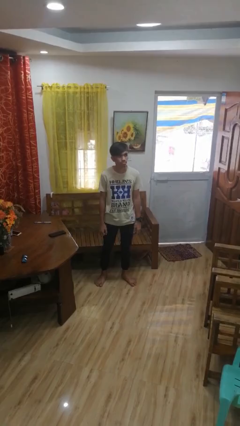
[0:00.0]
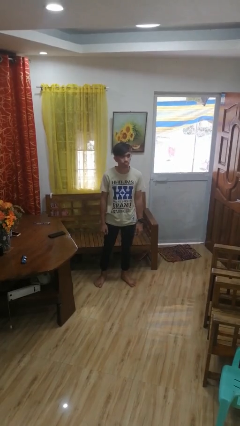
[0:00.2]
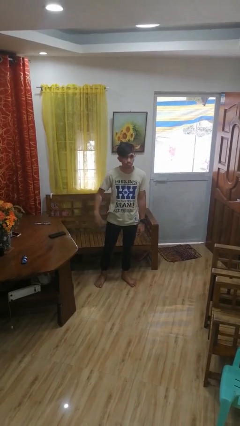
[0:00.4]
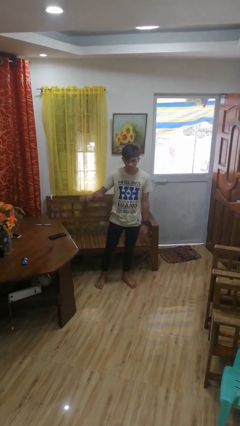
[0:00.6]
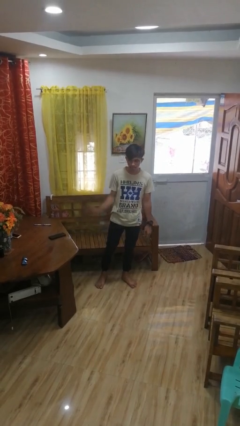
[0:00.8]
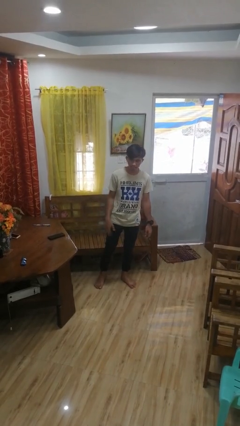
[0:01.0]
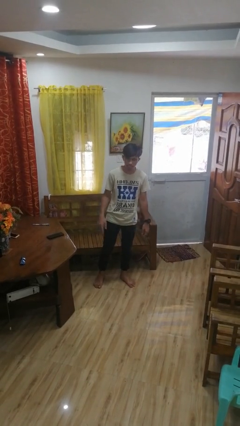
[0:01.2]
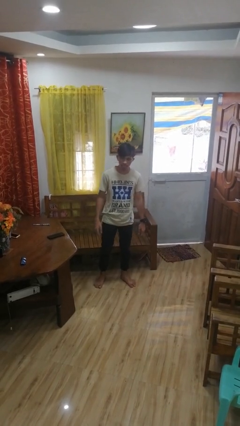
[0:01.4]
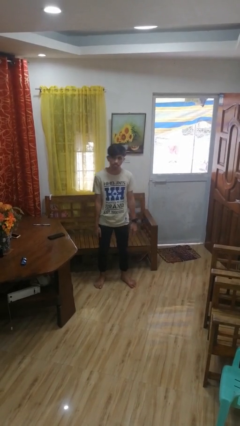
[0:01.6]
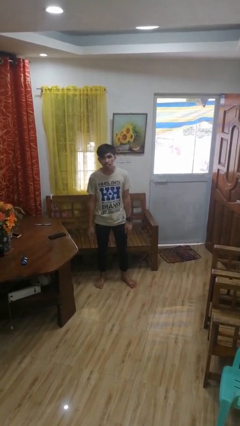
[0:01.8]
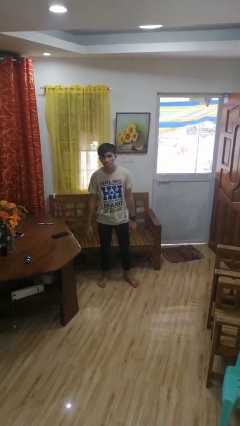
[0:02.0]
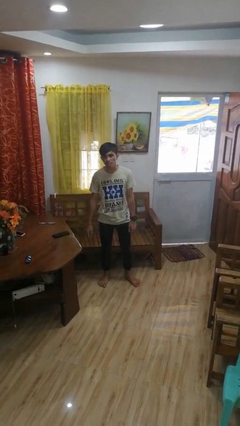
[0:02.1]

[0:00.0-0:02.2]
person slaps hands on thighs

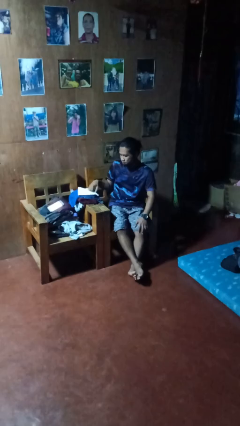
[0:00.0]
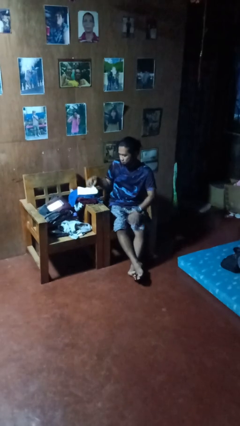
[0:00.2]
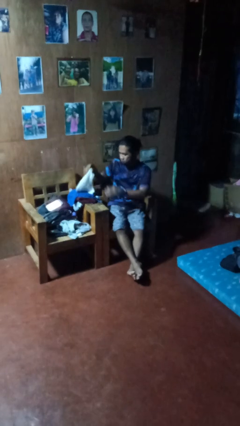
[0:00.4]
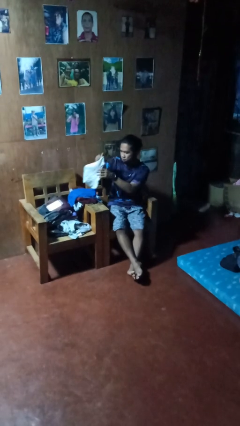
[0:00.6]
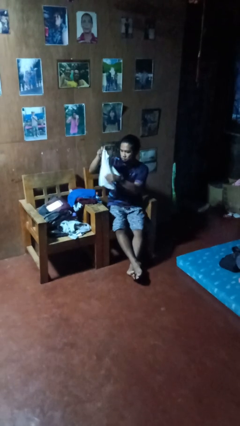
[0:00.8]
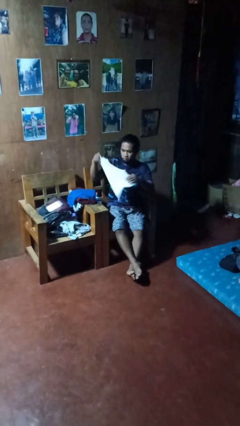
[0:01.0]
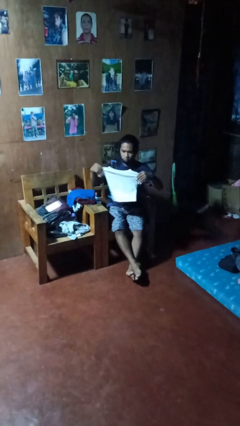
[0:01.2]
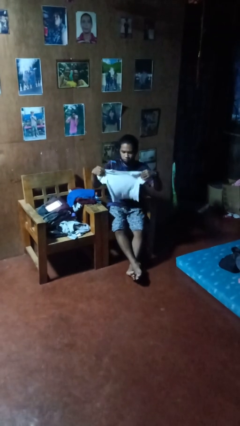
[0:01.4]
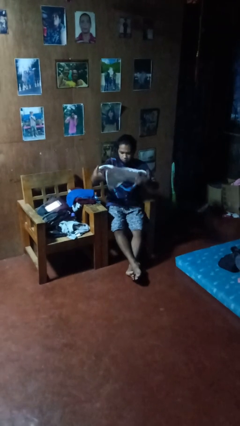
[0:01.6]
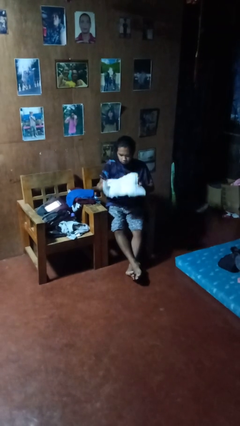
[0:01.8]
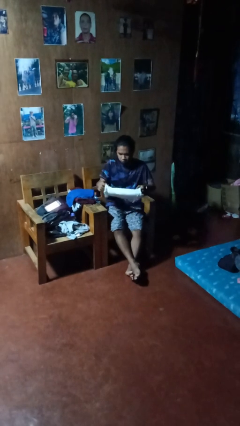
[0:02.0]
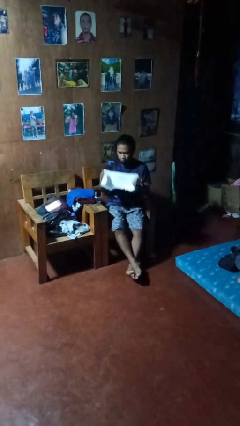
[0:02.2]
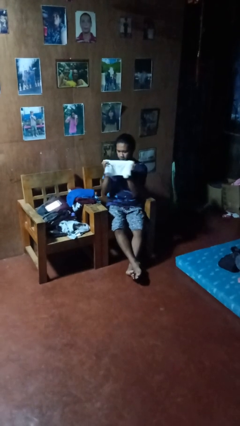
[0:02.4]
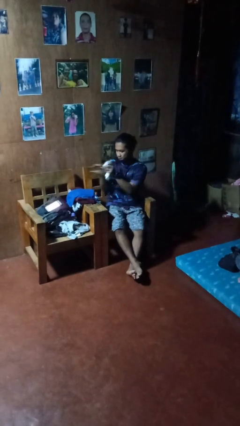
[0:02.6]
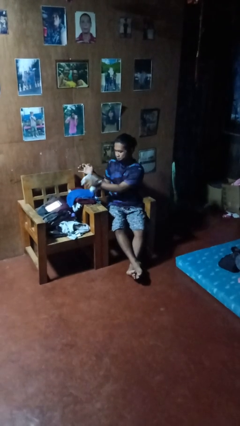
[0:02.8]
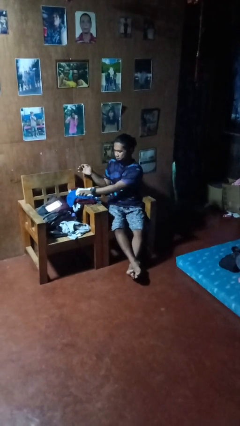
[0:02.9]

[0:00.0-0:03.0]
person folds shirt

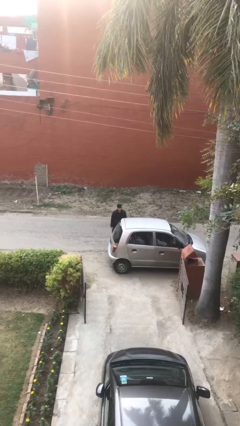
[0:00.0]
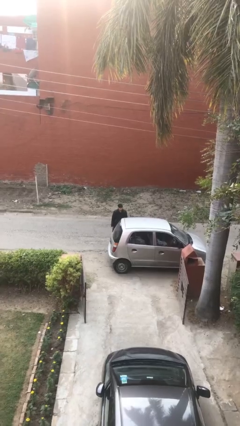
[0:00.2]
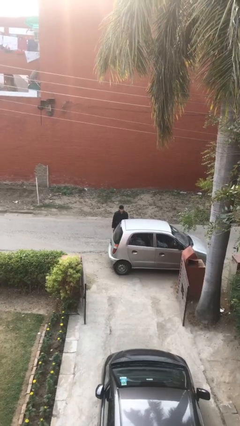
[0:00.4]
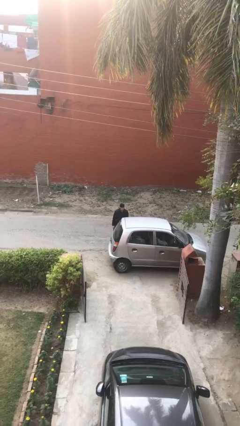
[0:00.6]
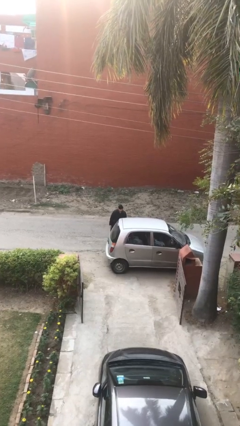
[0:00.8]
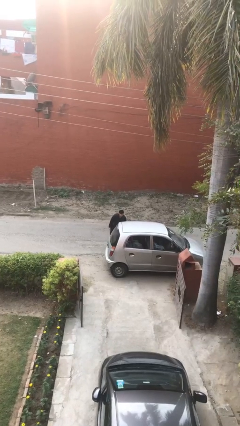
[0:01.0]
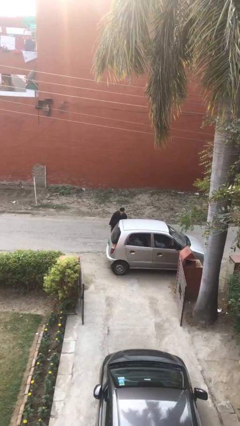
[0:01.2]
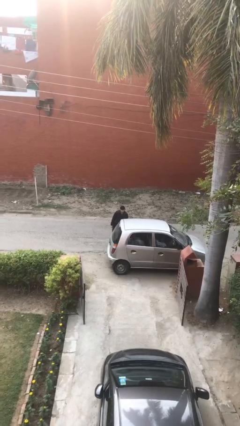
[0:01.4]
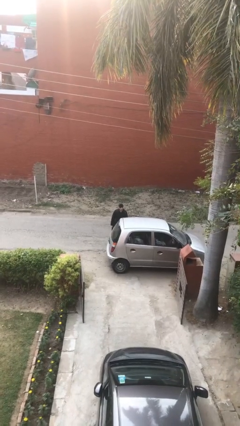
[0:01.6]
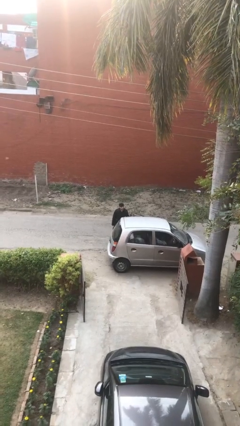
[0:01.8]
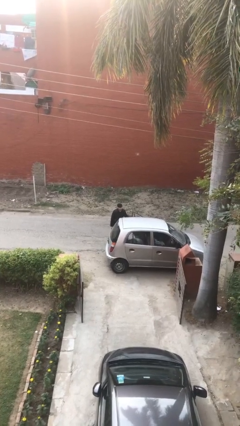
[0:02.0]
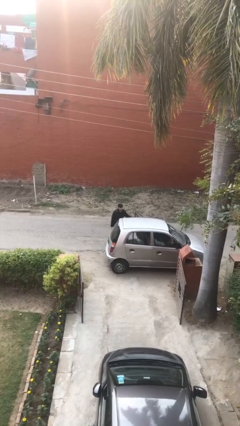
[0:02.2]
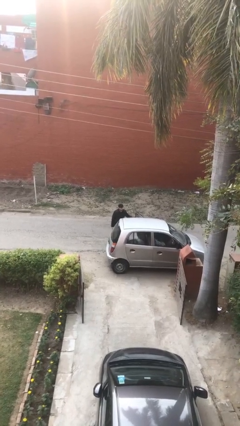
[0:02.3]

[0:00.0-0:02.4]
person opens car door

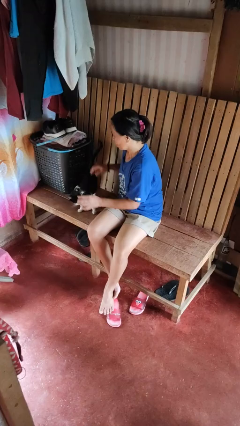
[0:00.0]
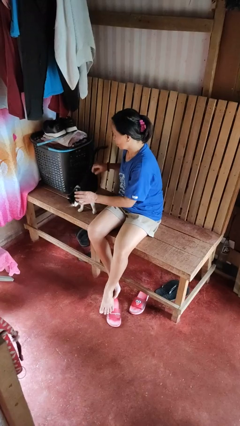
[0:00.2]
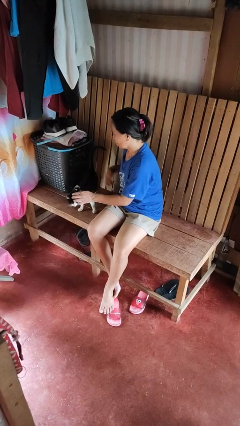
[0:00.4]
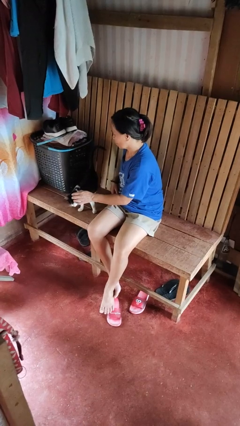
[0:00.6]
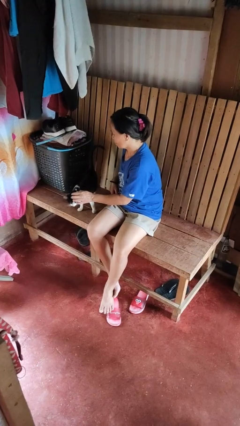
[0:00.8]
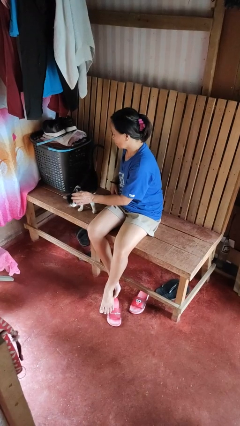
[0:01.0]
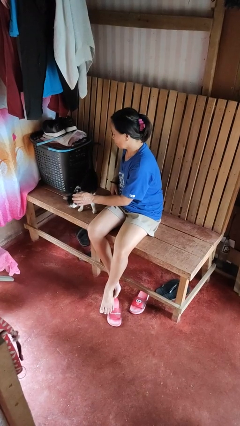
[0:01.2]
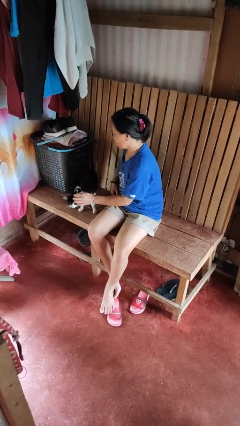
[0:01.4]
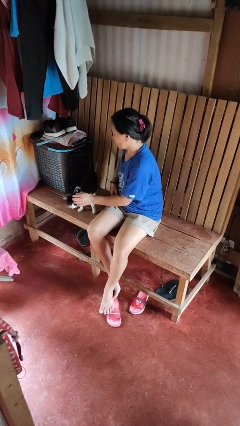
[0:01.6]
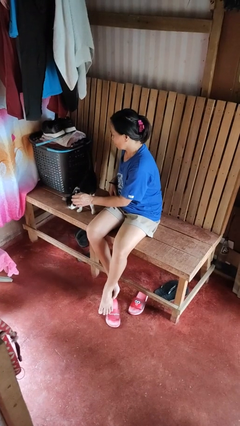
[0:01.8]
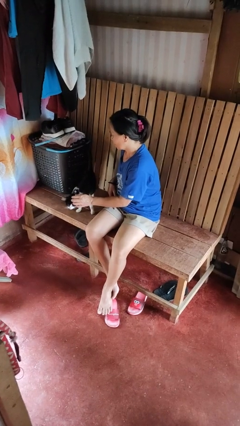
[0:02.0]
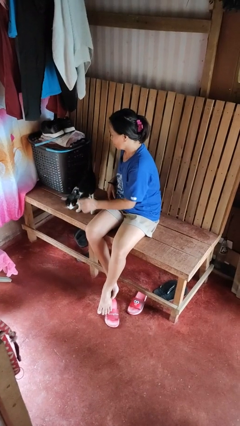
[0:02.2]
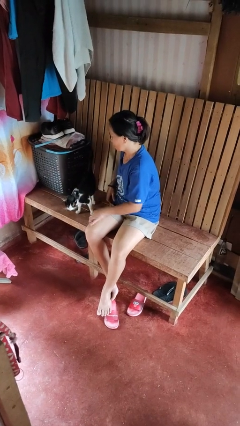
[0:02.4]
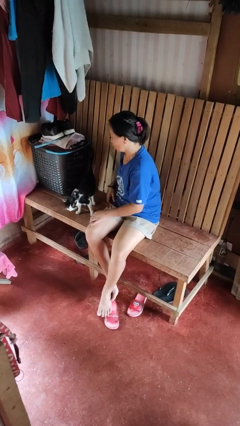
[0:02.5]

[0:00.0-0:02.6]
person pets cat

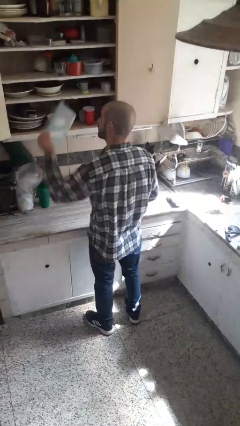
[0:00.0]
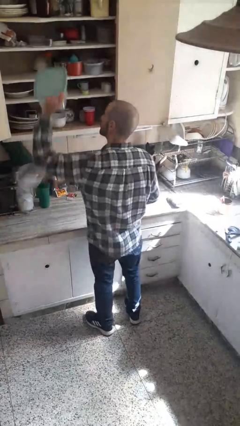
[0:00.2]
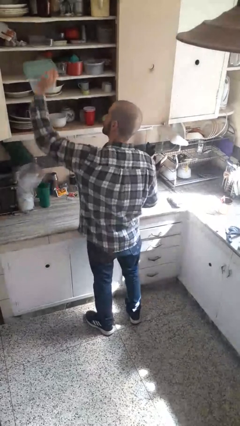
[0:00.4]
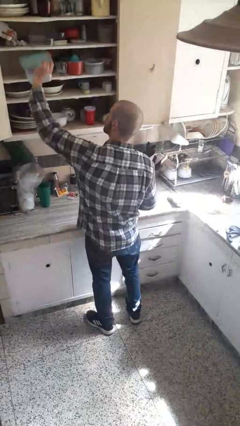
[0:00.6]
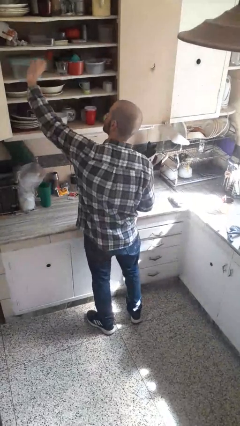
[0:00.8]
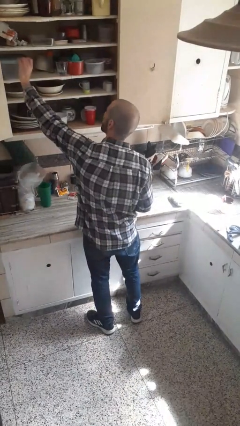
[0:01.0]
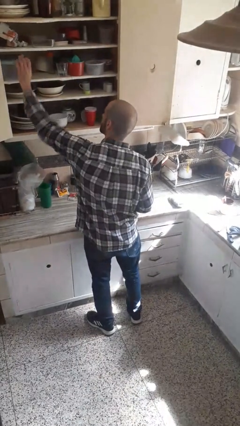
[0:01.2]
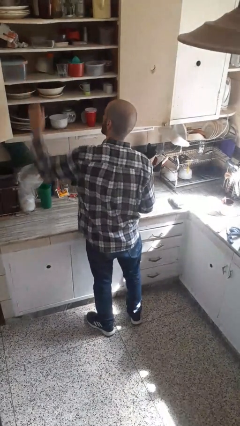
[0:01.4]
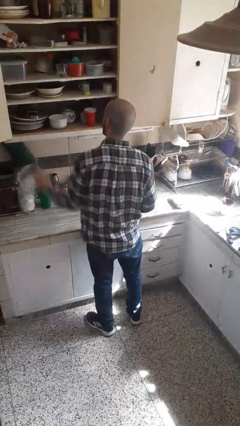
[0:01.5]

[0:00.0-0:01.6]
person puts down object into cabinet

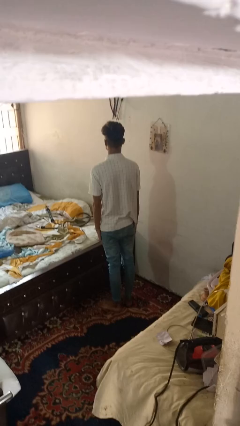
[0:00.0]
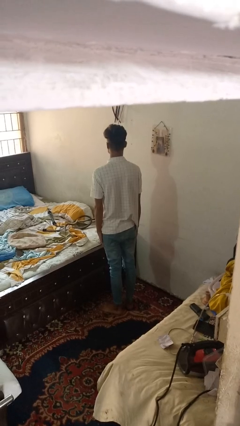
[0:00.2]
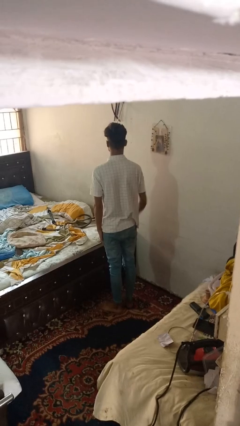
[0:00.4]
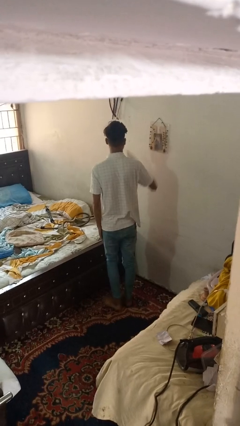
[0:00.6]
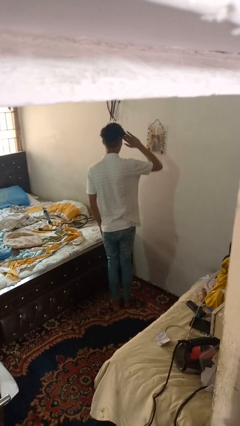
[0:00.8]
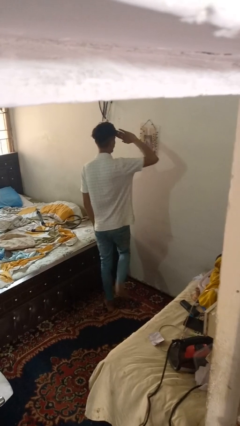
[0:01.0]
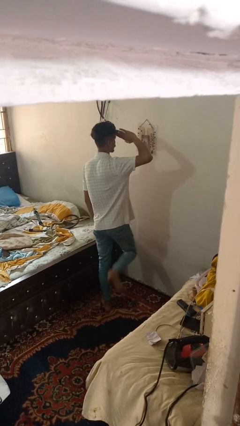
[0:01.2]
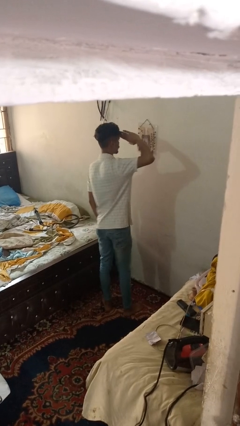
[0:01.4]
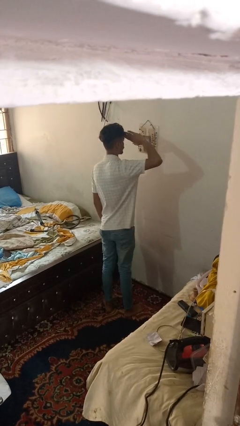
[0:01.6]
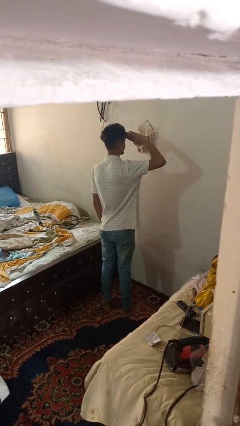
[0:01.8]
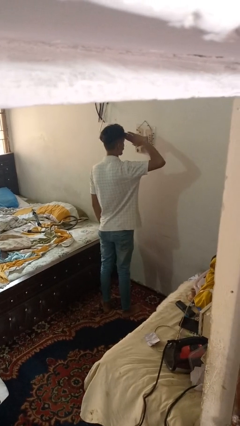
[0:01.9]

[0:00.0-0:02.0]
person salutes

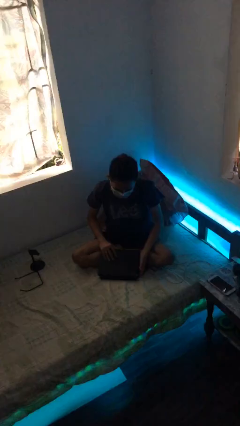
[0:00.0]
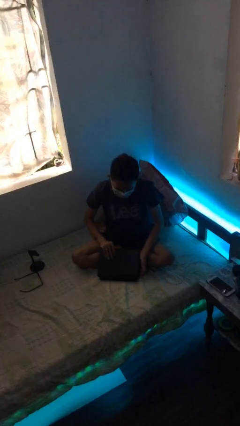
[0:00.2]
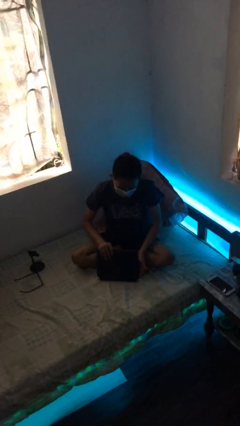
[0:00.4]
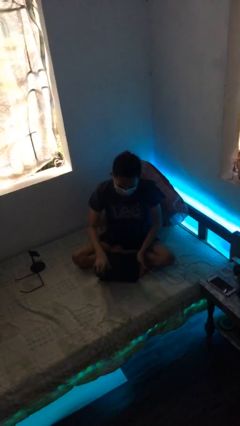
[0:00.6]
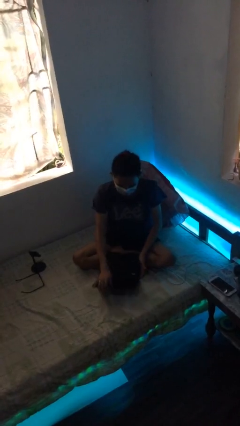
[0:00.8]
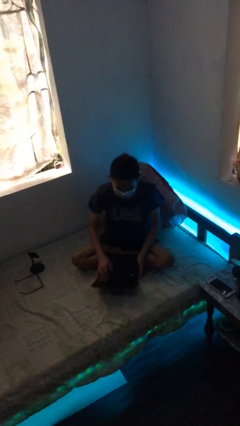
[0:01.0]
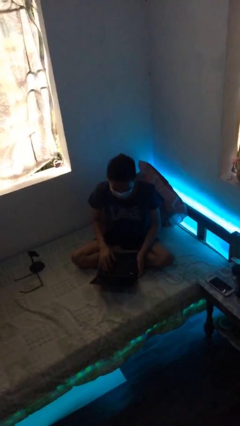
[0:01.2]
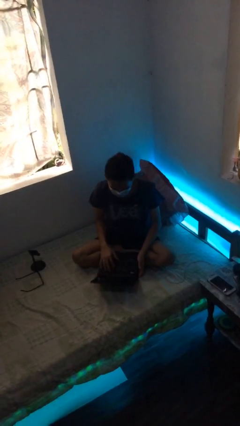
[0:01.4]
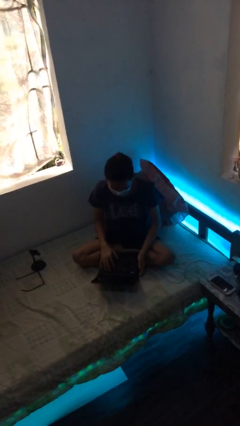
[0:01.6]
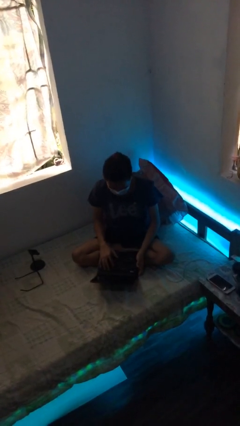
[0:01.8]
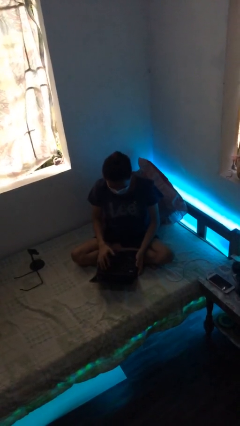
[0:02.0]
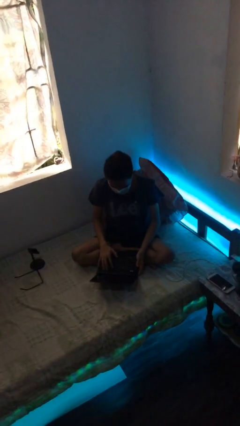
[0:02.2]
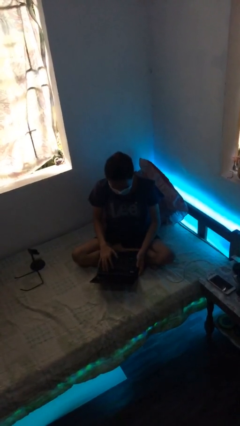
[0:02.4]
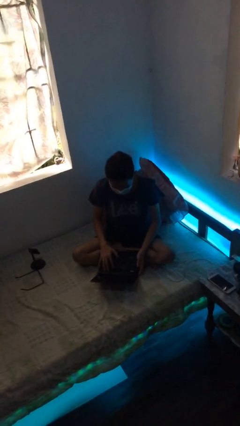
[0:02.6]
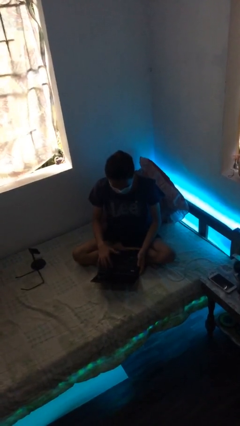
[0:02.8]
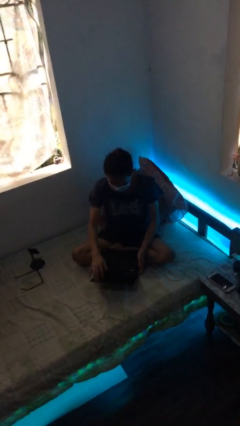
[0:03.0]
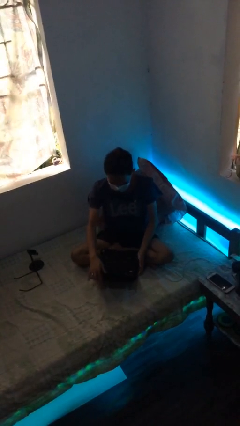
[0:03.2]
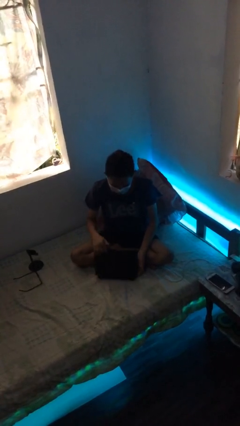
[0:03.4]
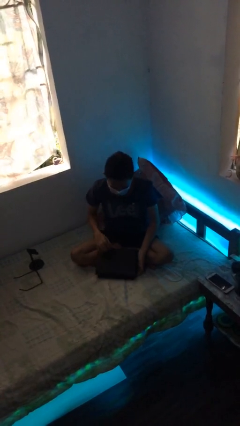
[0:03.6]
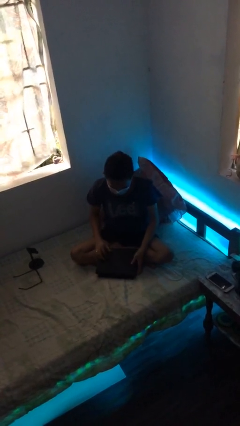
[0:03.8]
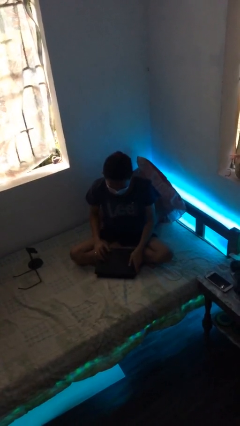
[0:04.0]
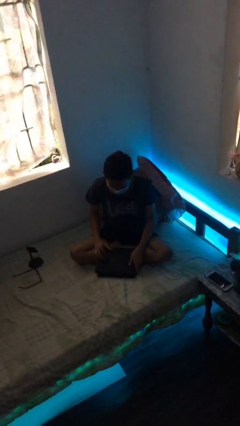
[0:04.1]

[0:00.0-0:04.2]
person interacts with laptop
